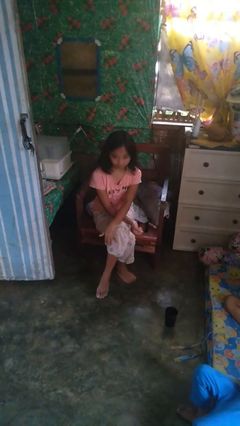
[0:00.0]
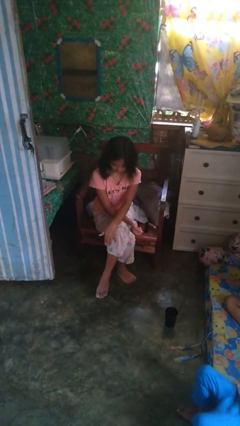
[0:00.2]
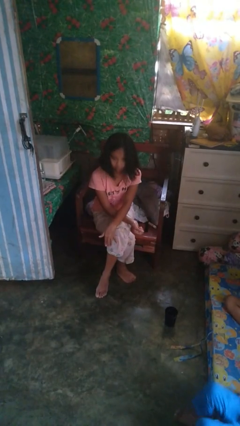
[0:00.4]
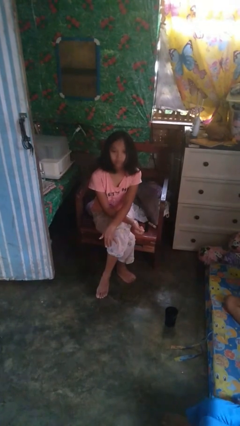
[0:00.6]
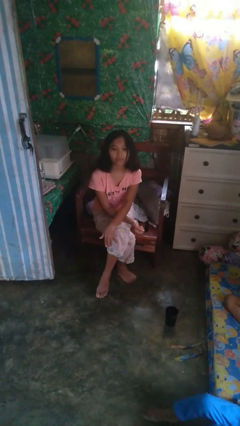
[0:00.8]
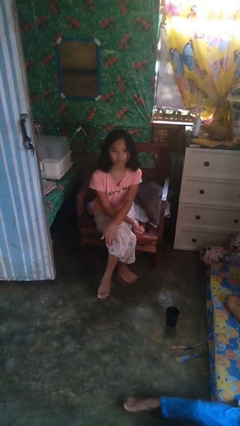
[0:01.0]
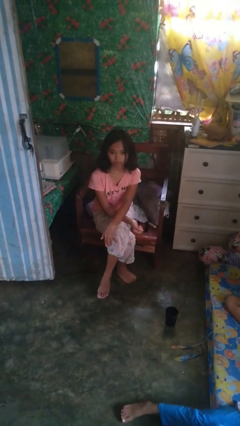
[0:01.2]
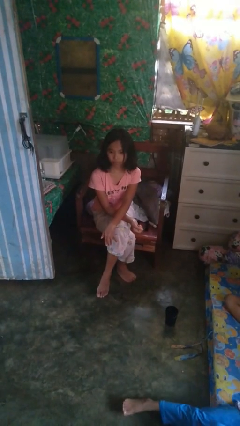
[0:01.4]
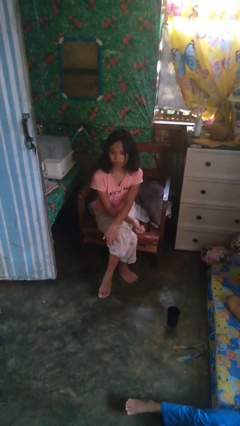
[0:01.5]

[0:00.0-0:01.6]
person nods head

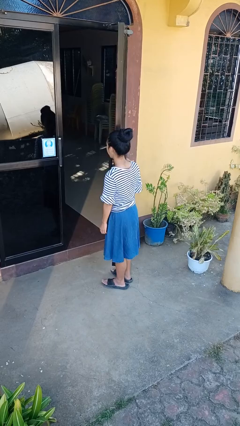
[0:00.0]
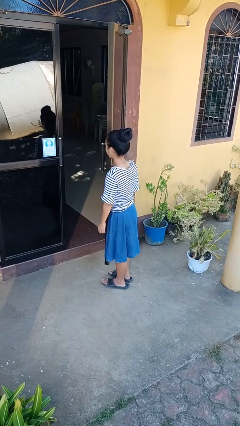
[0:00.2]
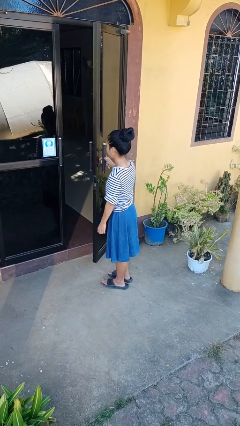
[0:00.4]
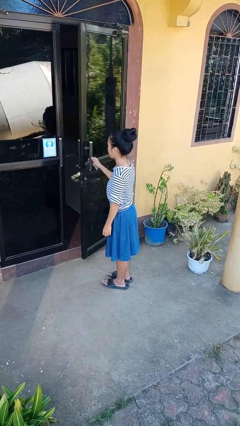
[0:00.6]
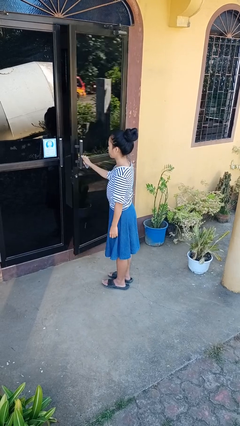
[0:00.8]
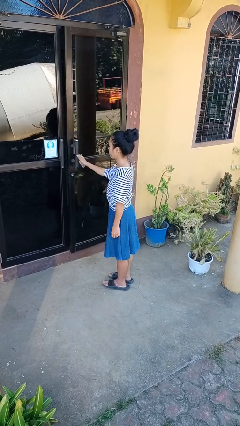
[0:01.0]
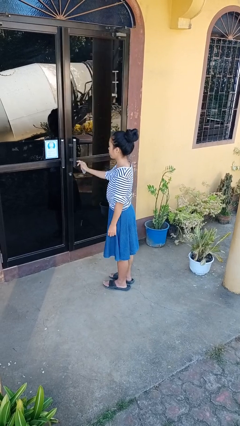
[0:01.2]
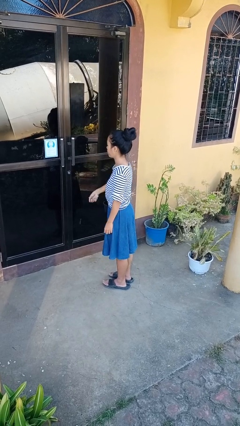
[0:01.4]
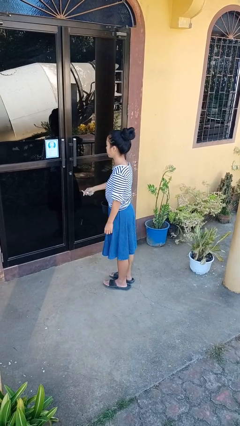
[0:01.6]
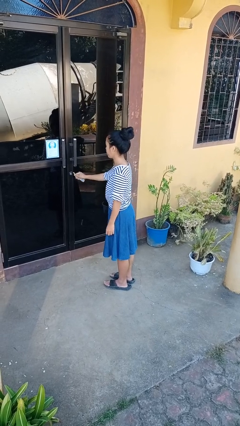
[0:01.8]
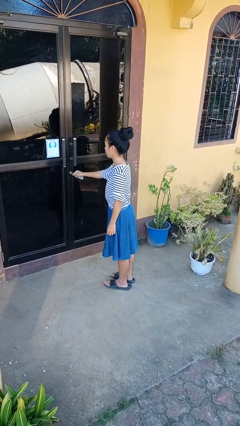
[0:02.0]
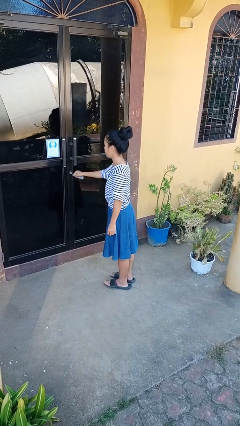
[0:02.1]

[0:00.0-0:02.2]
person closes facility door

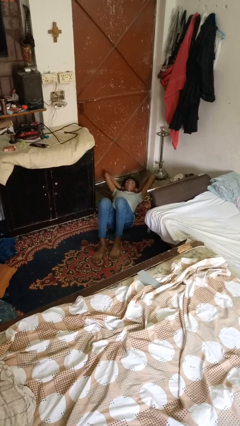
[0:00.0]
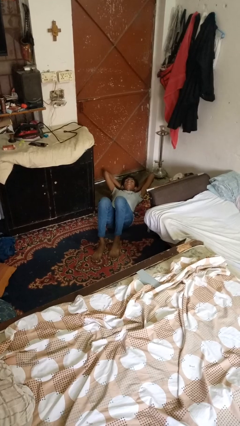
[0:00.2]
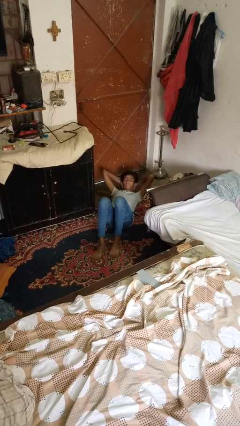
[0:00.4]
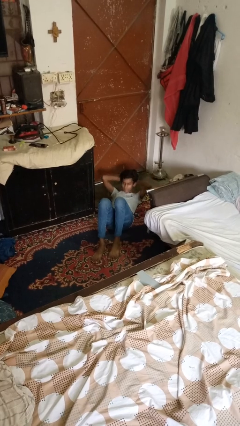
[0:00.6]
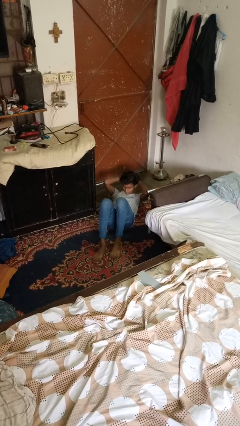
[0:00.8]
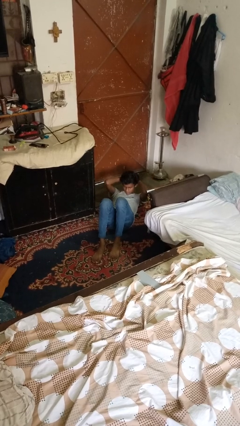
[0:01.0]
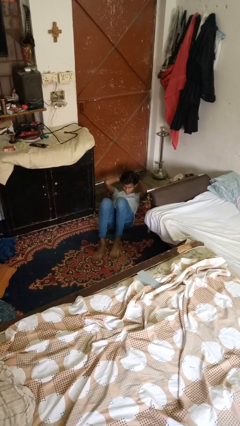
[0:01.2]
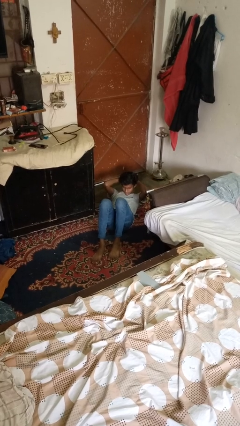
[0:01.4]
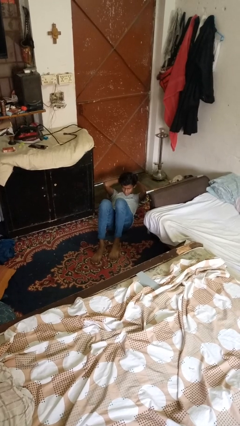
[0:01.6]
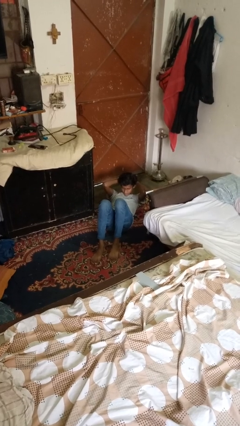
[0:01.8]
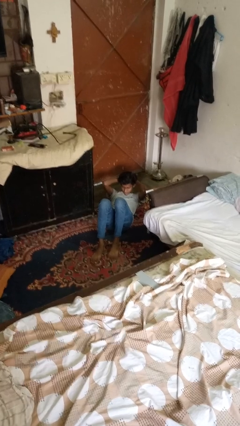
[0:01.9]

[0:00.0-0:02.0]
person exercises with situp

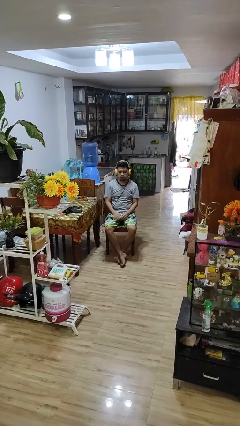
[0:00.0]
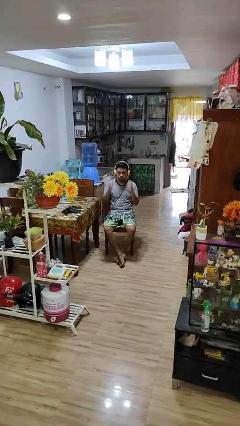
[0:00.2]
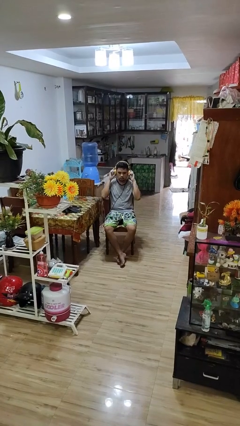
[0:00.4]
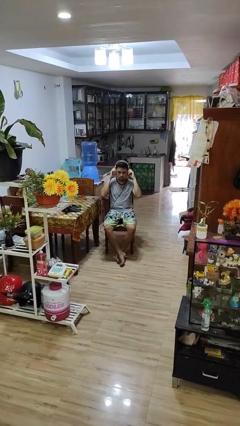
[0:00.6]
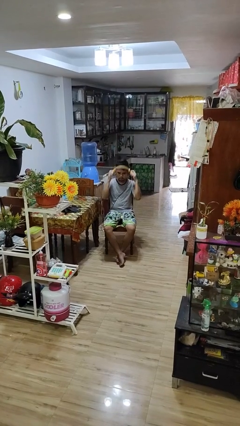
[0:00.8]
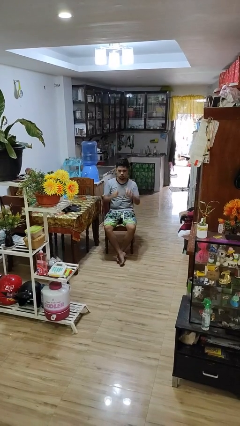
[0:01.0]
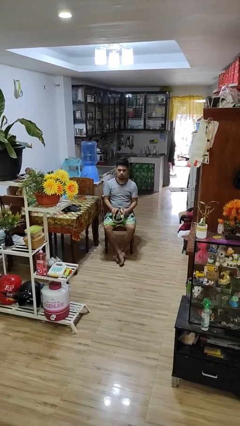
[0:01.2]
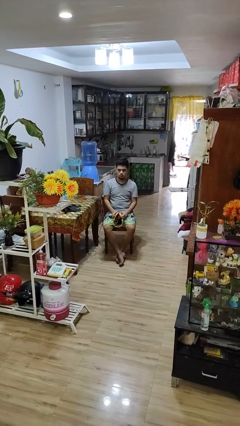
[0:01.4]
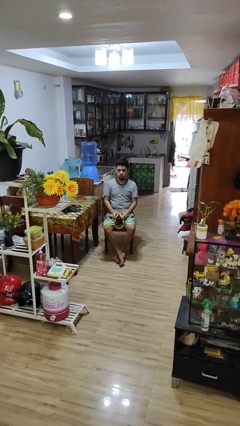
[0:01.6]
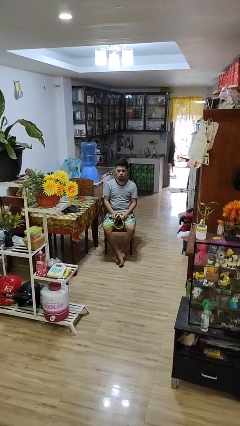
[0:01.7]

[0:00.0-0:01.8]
person takes off headphones

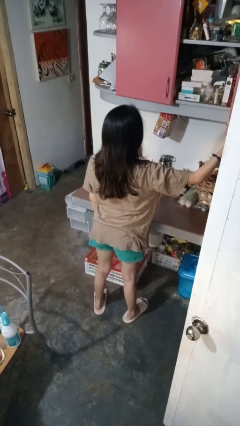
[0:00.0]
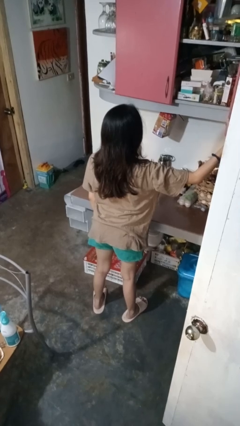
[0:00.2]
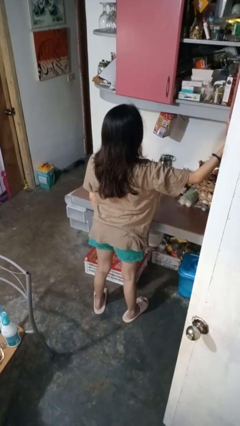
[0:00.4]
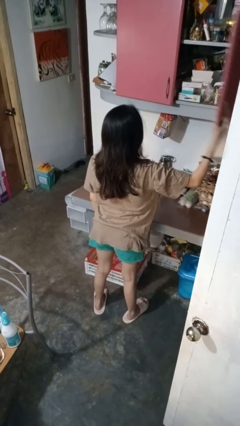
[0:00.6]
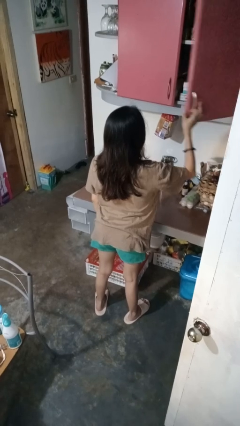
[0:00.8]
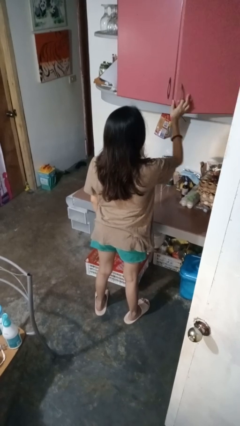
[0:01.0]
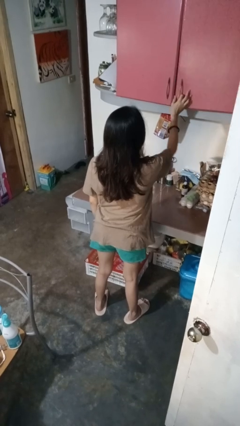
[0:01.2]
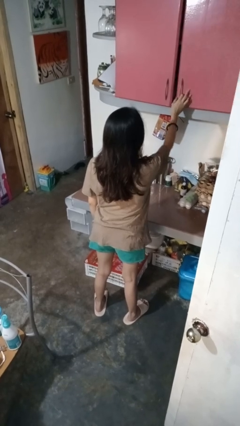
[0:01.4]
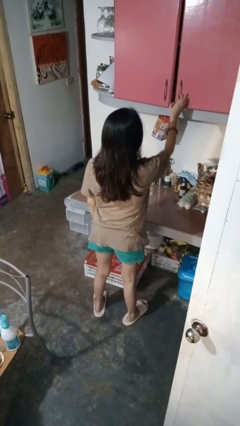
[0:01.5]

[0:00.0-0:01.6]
person closes cabinet

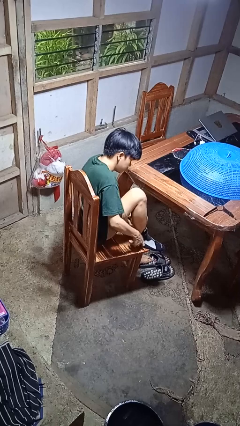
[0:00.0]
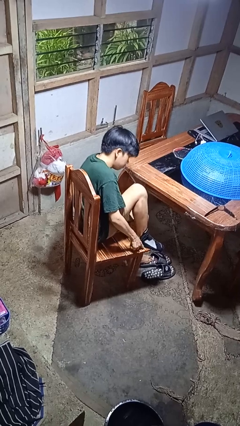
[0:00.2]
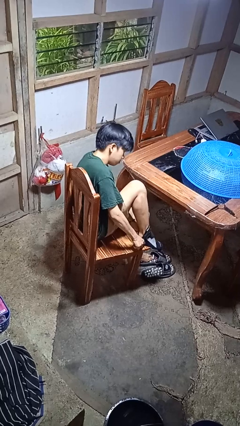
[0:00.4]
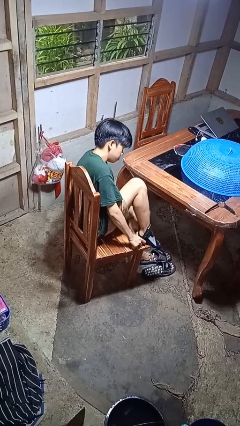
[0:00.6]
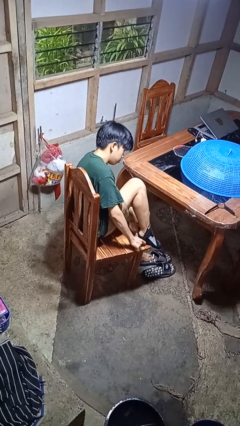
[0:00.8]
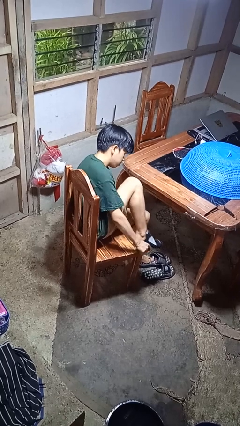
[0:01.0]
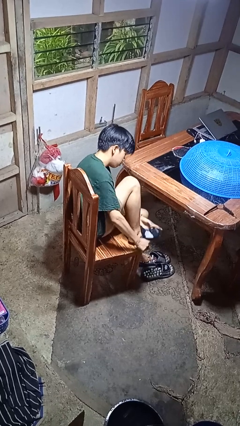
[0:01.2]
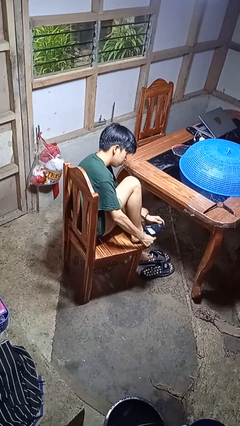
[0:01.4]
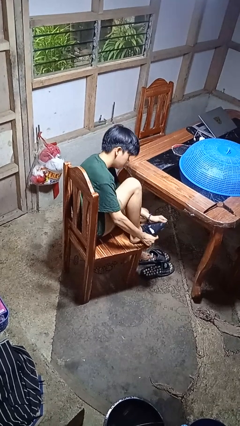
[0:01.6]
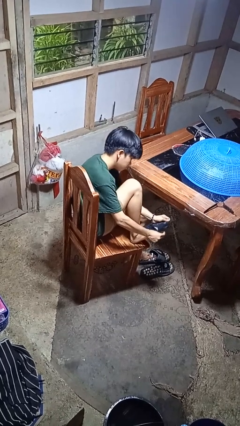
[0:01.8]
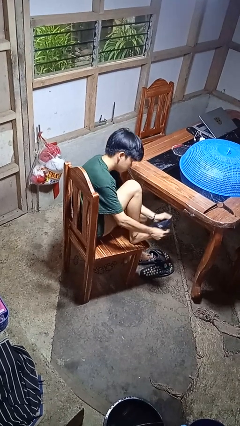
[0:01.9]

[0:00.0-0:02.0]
person takes off socks

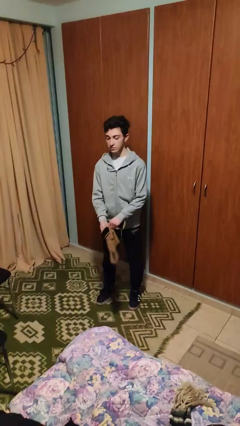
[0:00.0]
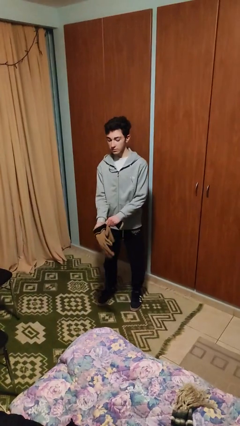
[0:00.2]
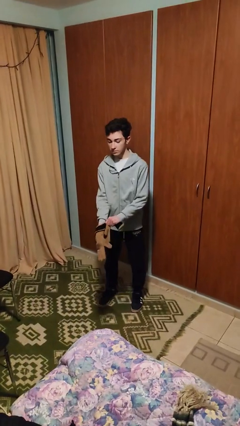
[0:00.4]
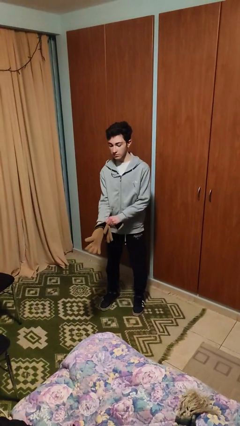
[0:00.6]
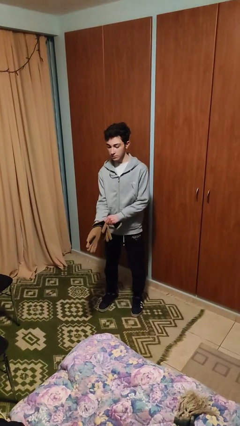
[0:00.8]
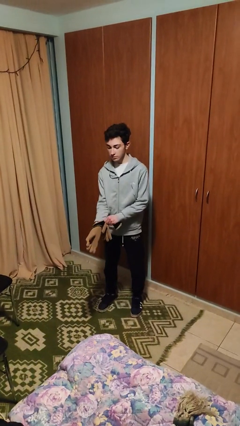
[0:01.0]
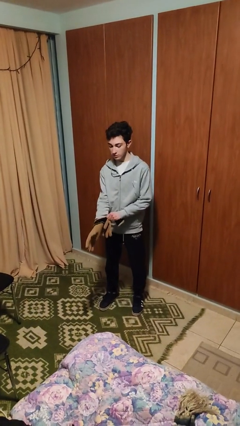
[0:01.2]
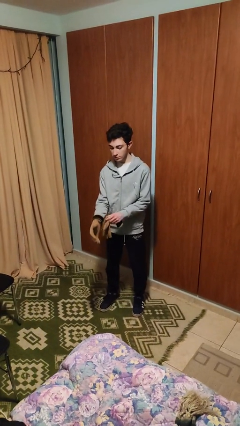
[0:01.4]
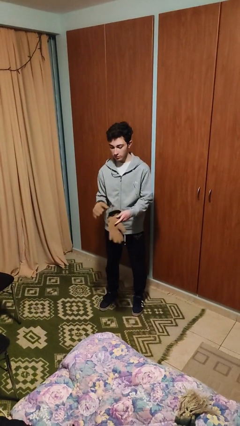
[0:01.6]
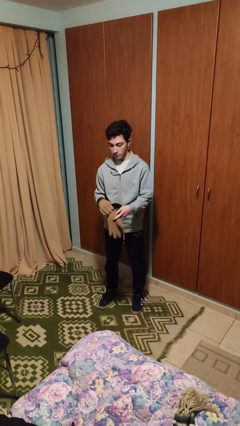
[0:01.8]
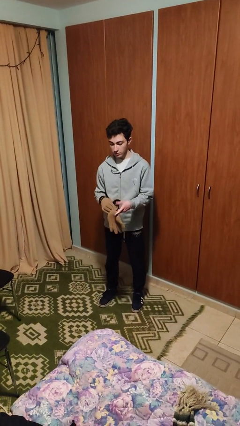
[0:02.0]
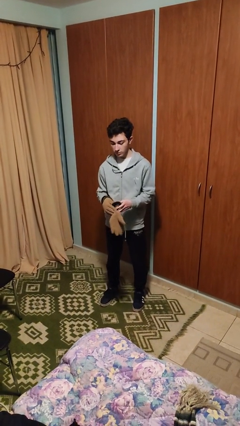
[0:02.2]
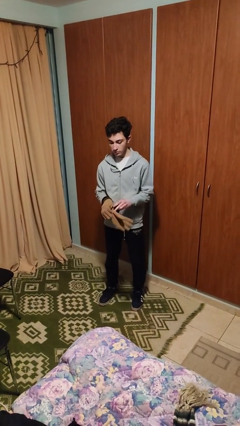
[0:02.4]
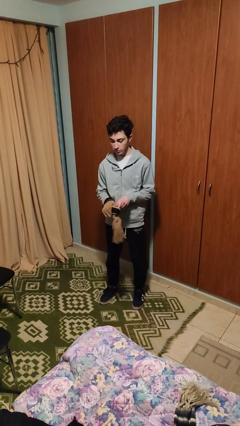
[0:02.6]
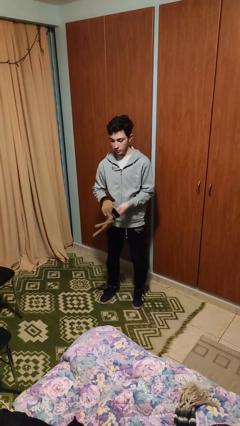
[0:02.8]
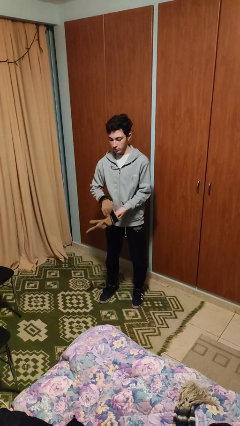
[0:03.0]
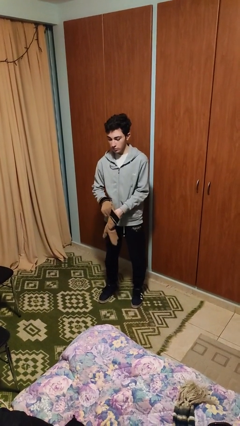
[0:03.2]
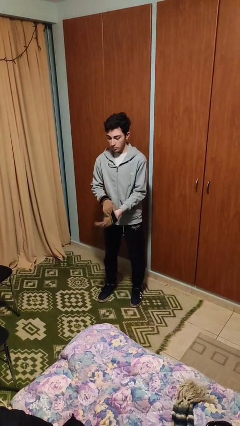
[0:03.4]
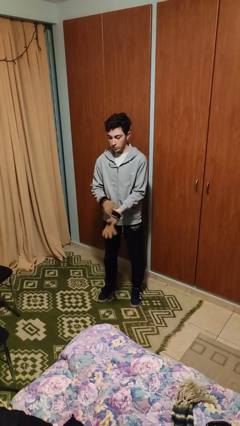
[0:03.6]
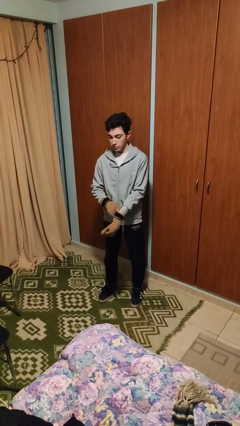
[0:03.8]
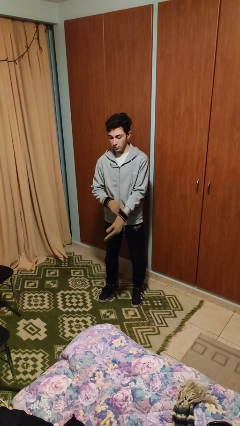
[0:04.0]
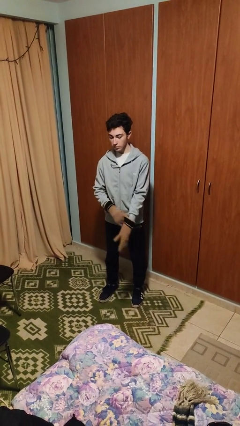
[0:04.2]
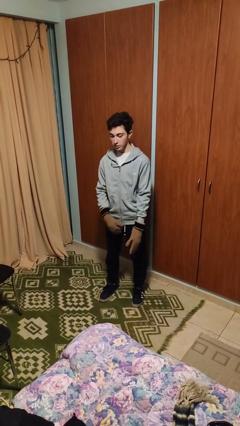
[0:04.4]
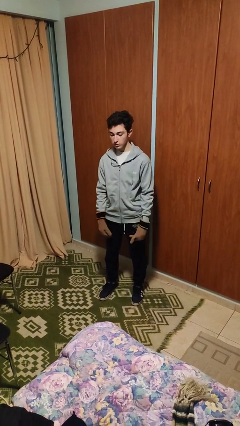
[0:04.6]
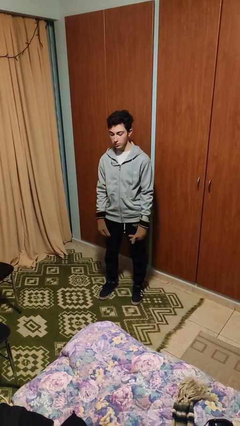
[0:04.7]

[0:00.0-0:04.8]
person puts on gloves

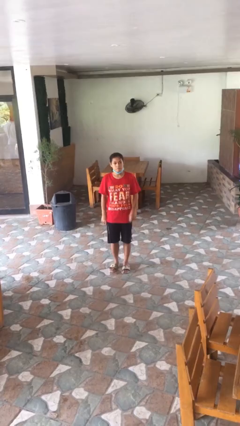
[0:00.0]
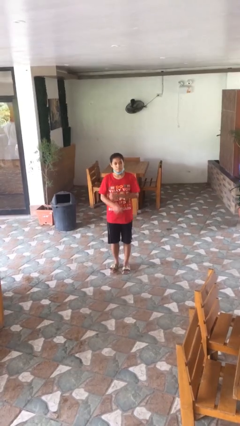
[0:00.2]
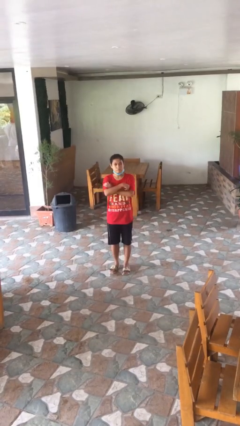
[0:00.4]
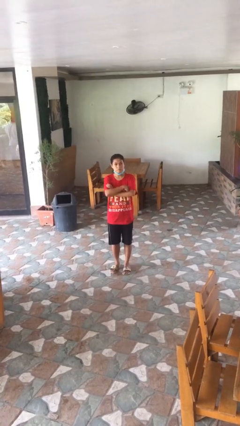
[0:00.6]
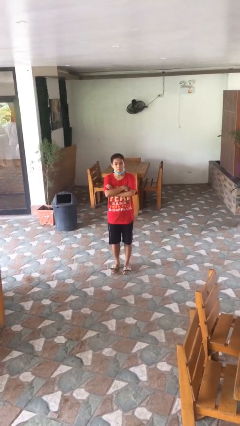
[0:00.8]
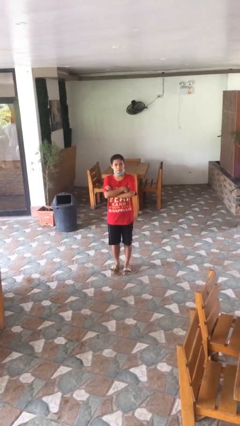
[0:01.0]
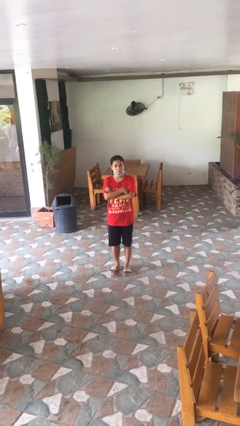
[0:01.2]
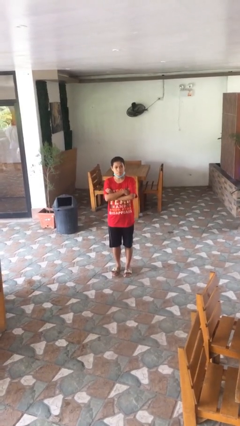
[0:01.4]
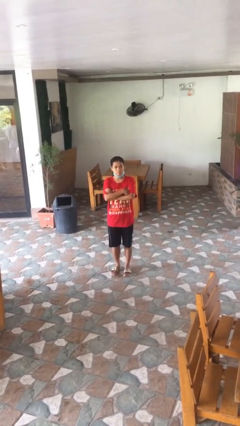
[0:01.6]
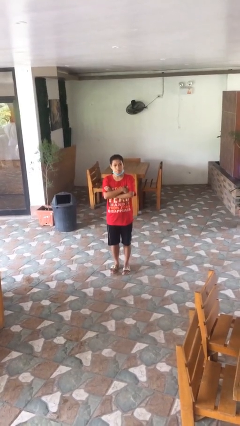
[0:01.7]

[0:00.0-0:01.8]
person crosses arms
